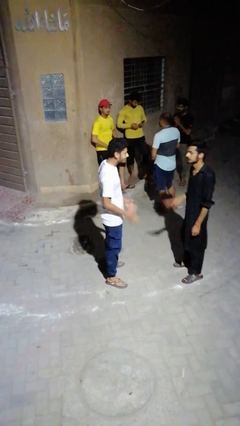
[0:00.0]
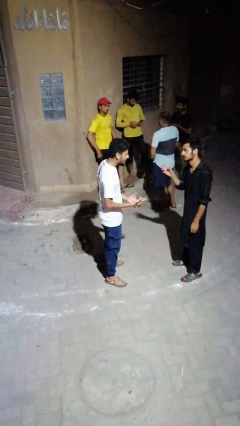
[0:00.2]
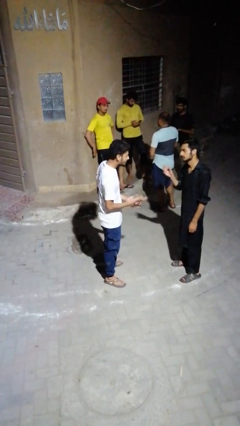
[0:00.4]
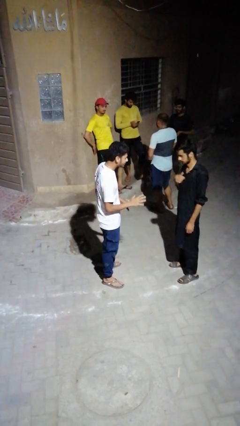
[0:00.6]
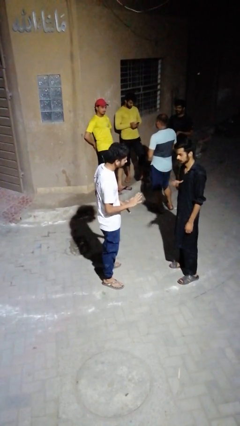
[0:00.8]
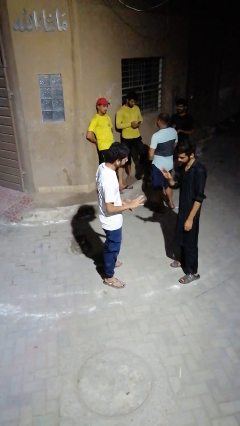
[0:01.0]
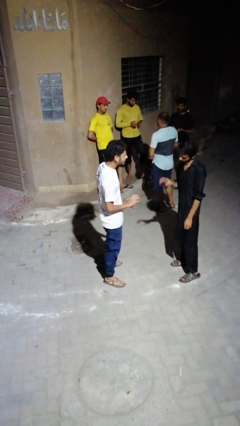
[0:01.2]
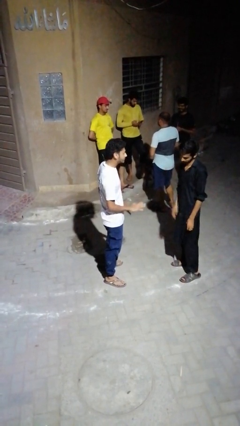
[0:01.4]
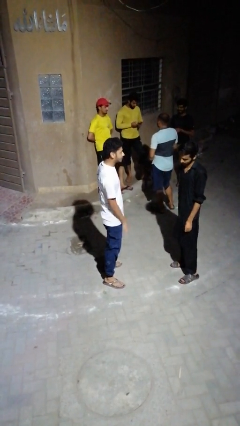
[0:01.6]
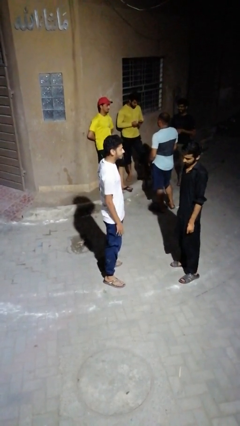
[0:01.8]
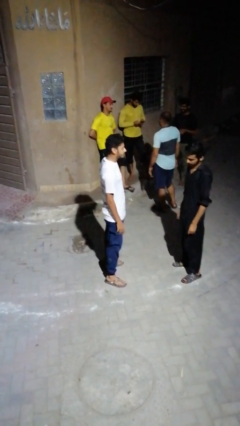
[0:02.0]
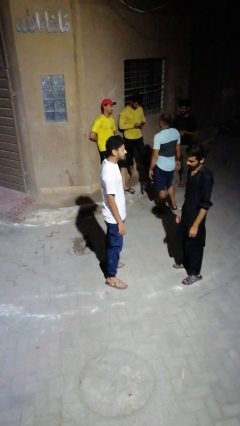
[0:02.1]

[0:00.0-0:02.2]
person talks to person

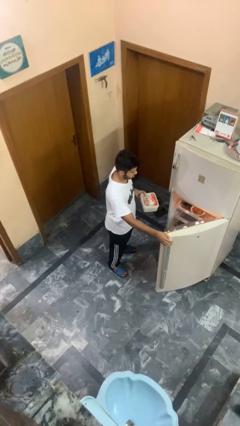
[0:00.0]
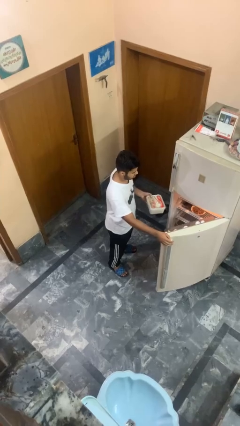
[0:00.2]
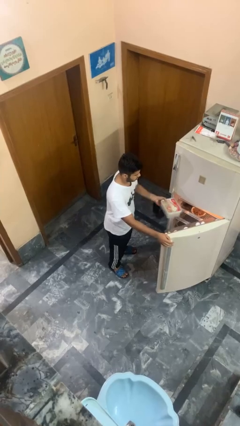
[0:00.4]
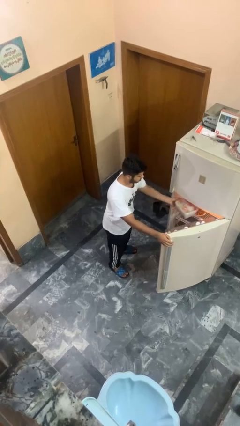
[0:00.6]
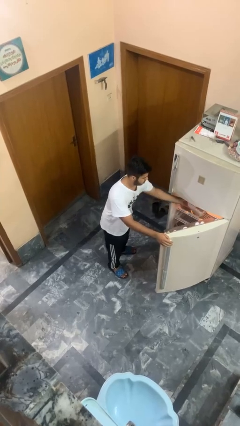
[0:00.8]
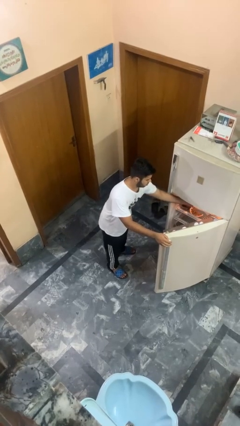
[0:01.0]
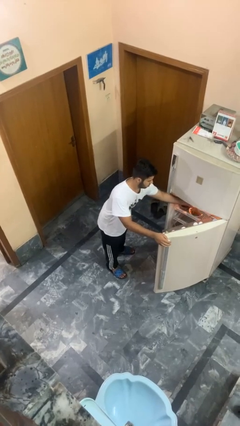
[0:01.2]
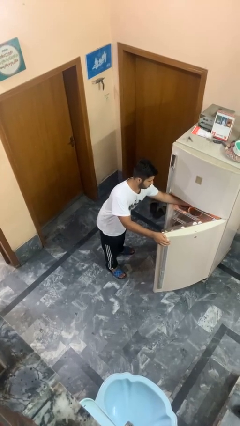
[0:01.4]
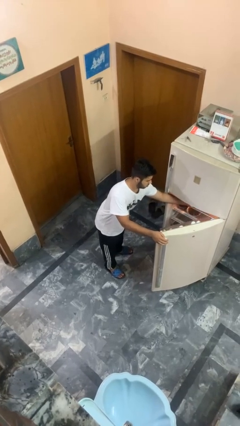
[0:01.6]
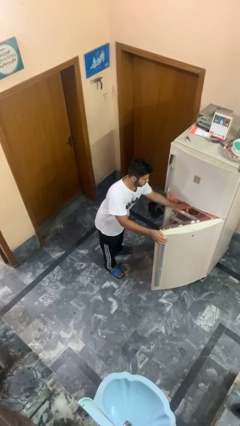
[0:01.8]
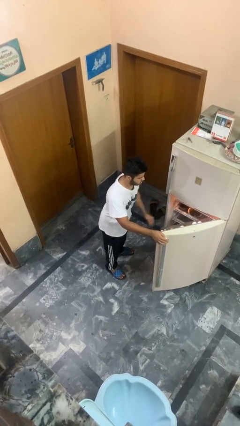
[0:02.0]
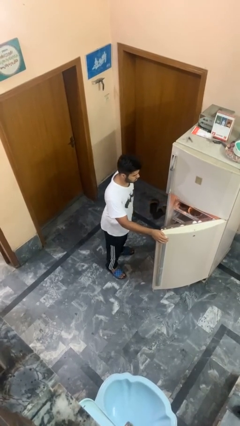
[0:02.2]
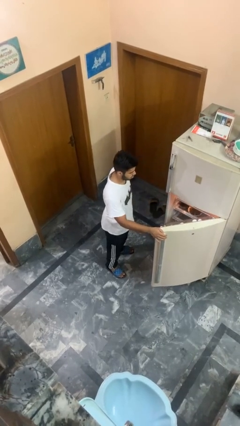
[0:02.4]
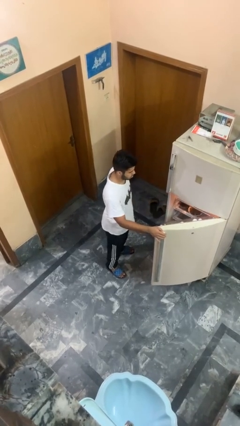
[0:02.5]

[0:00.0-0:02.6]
person puts object into refrigerator

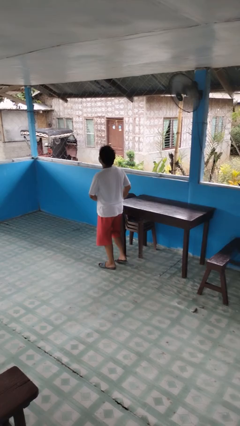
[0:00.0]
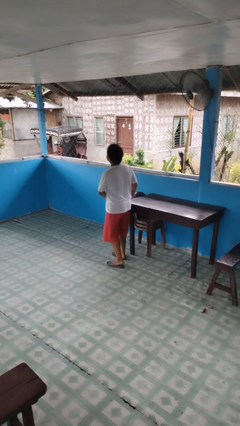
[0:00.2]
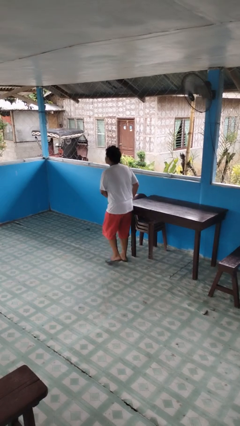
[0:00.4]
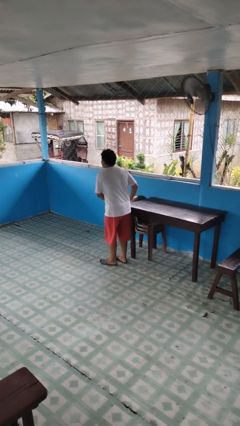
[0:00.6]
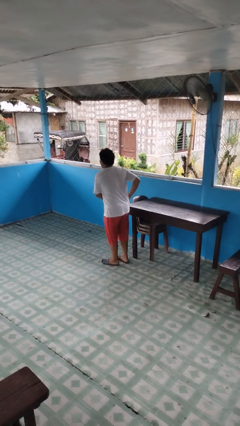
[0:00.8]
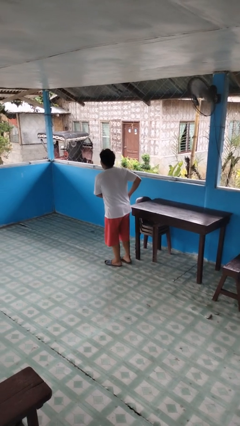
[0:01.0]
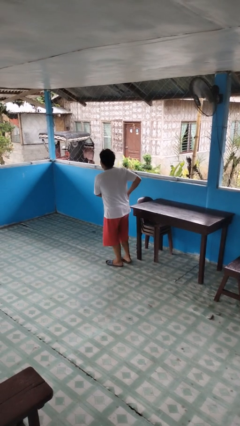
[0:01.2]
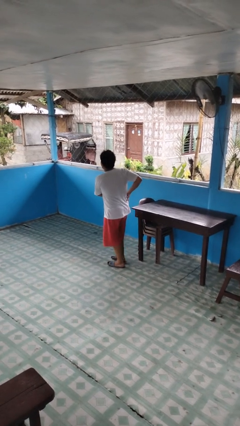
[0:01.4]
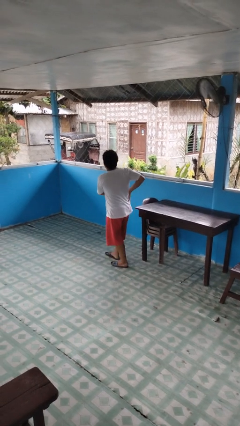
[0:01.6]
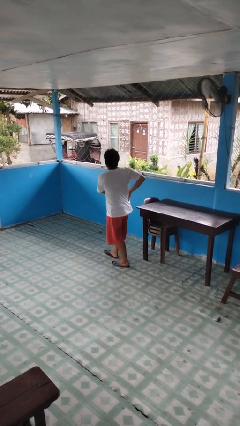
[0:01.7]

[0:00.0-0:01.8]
person bumps into table

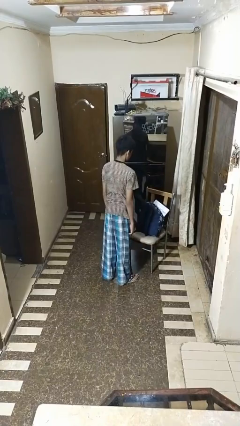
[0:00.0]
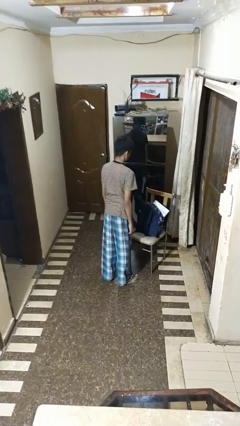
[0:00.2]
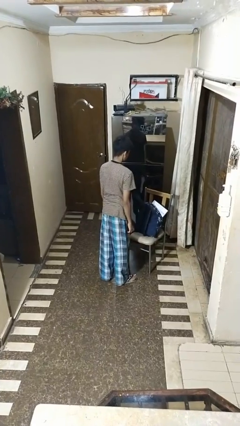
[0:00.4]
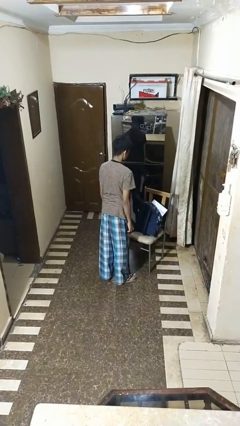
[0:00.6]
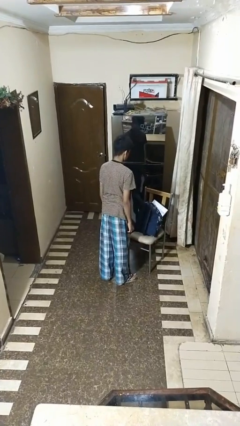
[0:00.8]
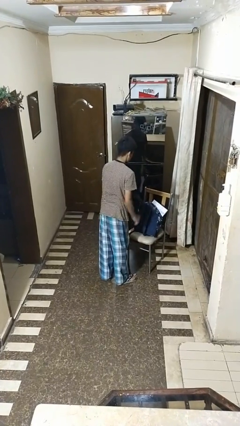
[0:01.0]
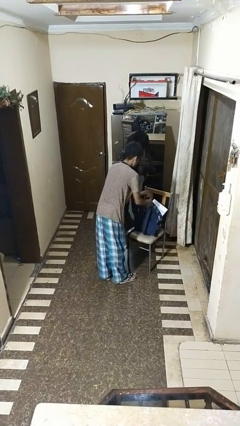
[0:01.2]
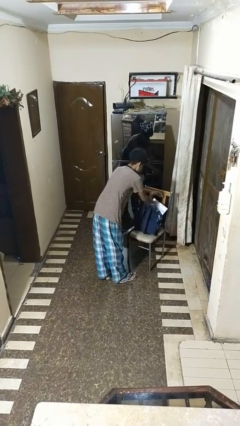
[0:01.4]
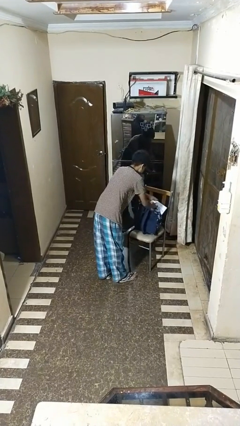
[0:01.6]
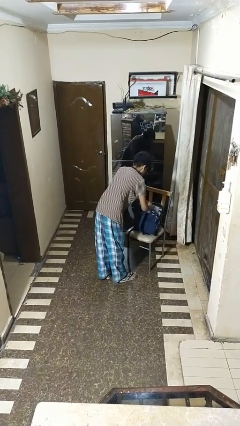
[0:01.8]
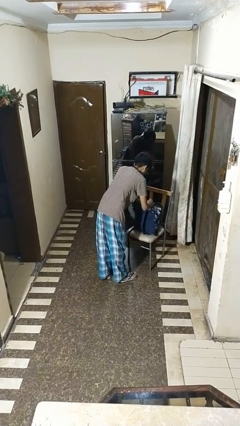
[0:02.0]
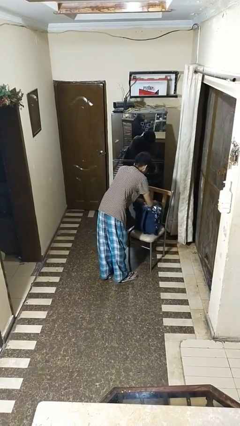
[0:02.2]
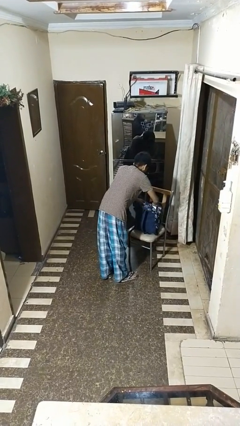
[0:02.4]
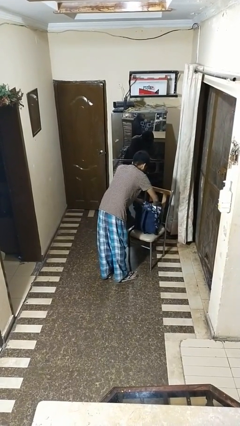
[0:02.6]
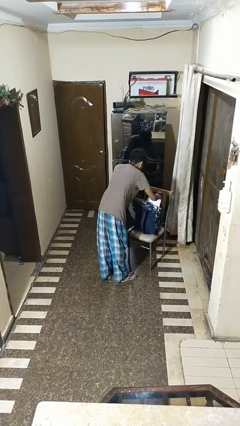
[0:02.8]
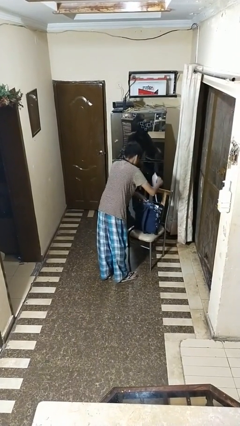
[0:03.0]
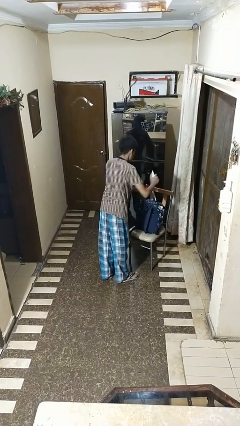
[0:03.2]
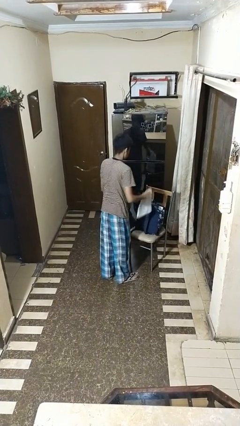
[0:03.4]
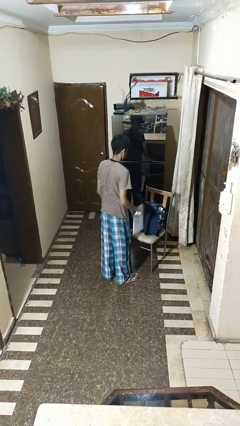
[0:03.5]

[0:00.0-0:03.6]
person takes object from bag

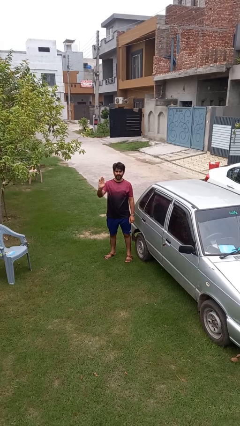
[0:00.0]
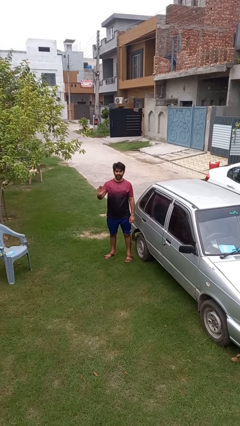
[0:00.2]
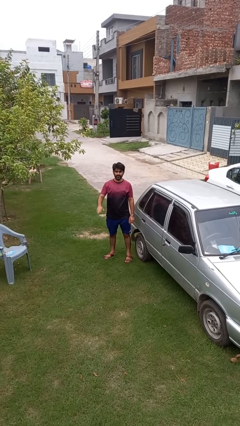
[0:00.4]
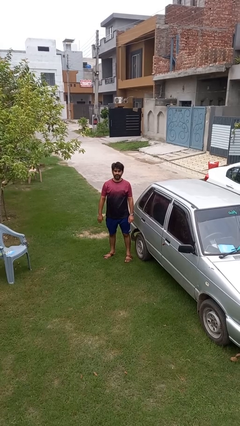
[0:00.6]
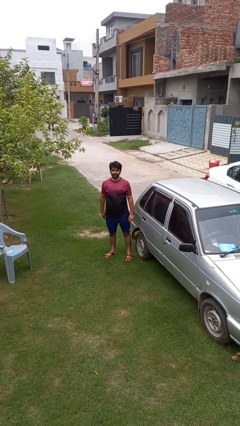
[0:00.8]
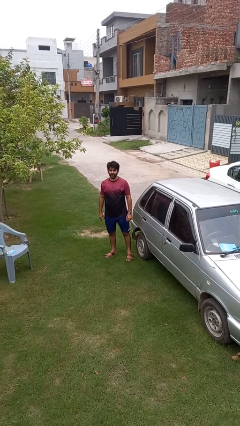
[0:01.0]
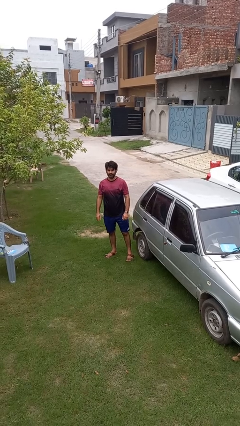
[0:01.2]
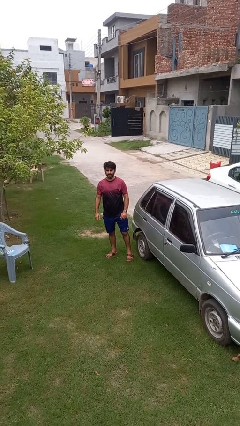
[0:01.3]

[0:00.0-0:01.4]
person gestures lower hand

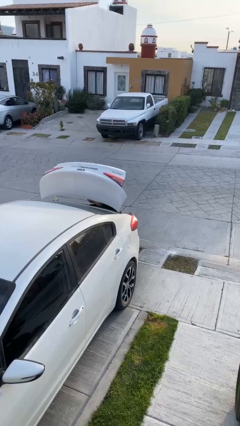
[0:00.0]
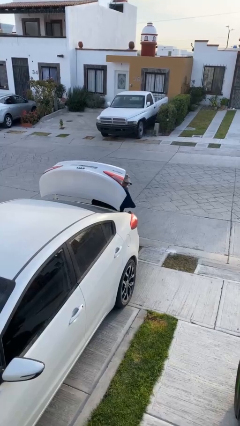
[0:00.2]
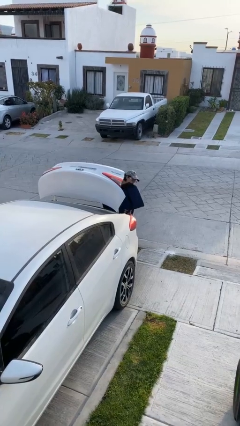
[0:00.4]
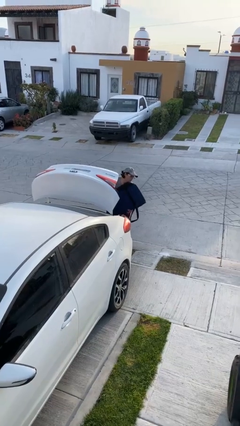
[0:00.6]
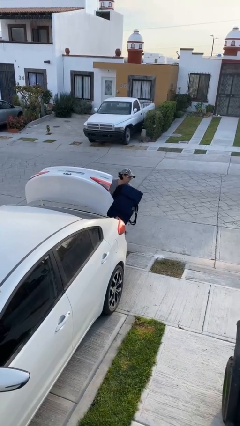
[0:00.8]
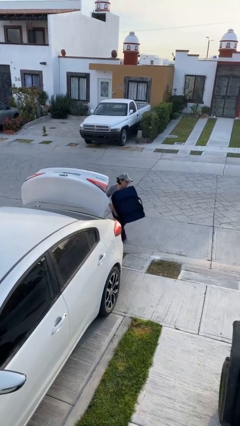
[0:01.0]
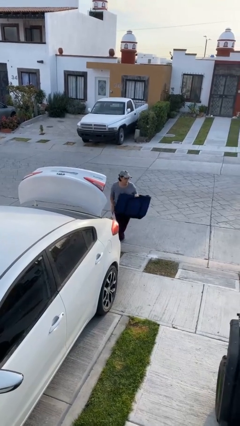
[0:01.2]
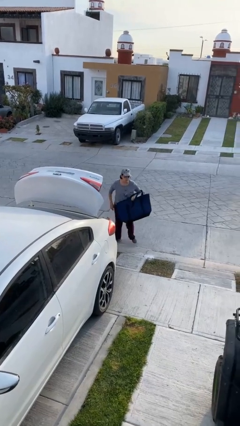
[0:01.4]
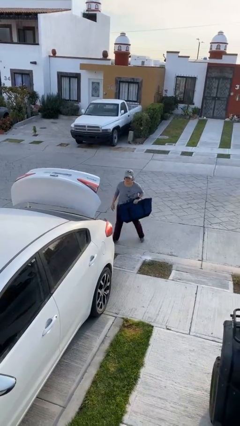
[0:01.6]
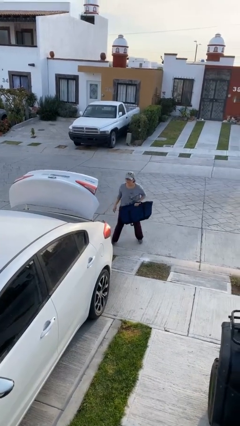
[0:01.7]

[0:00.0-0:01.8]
person unloads car

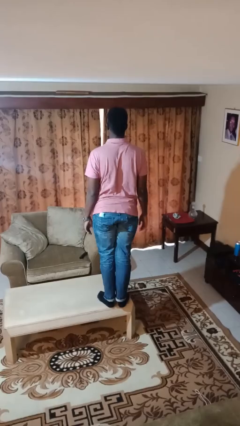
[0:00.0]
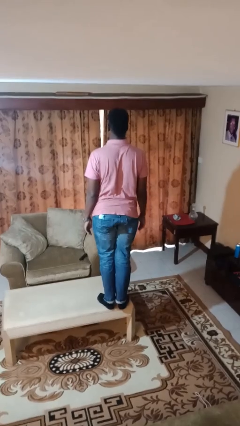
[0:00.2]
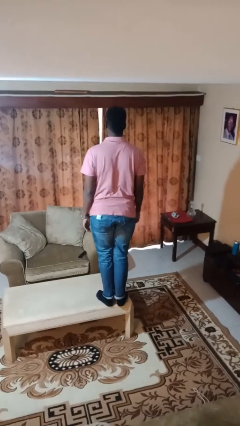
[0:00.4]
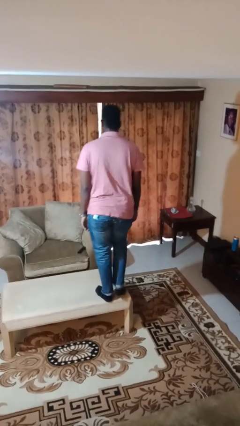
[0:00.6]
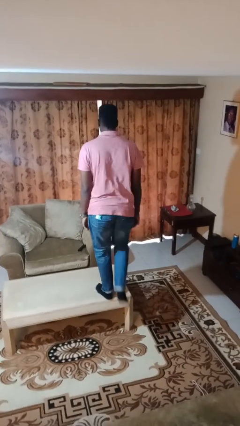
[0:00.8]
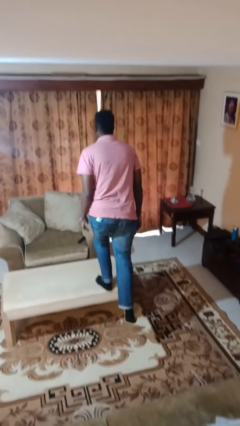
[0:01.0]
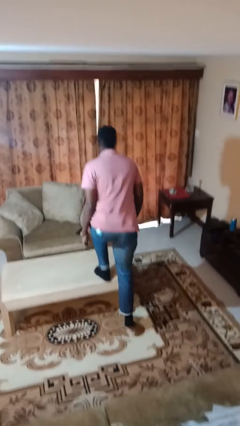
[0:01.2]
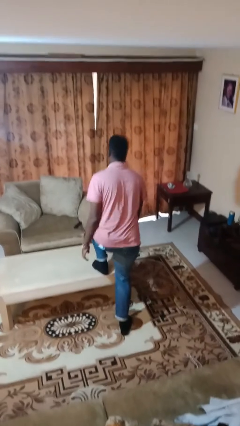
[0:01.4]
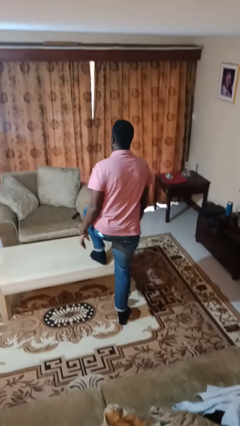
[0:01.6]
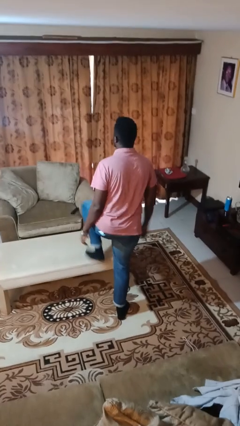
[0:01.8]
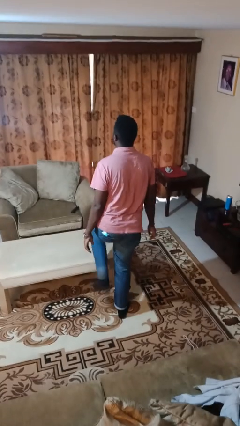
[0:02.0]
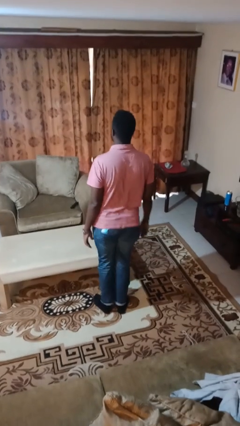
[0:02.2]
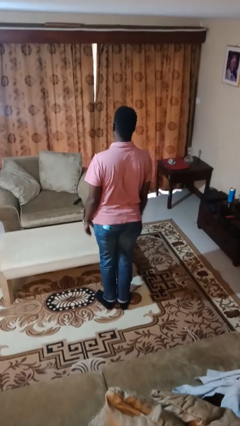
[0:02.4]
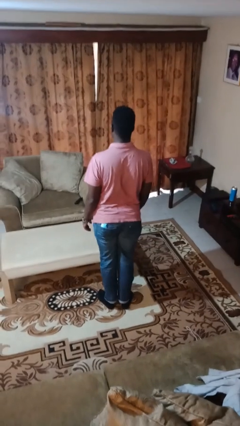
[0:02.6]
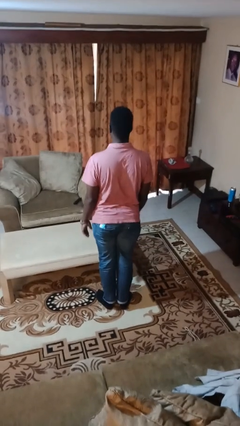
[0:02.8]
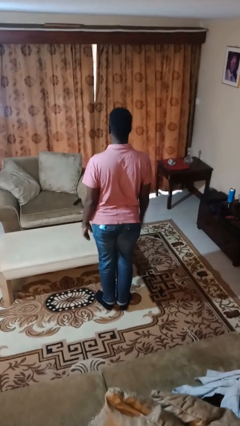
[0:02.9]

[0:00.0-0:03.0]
person climbs off table

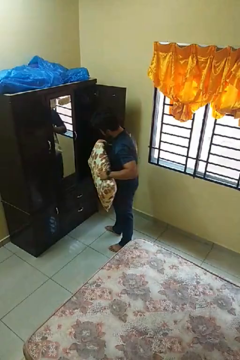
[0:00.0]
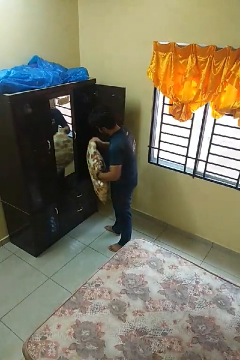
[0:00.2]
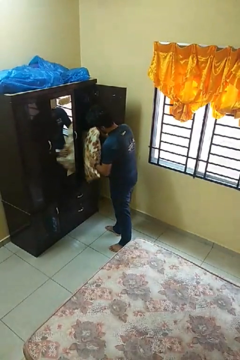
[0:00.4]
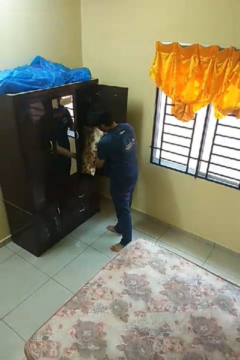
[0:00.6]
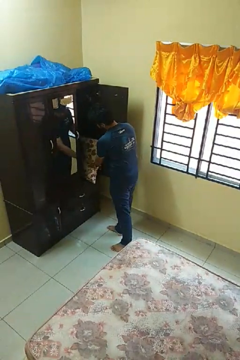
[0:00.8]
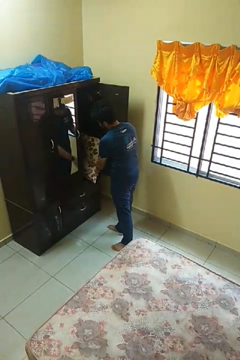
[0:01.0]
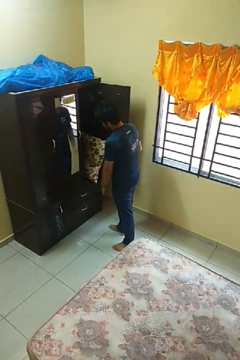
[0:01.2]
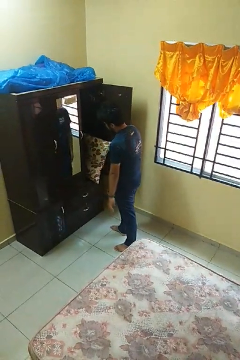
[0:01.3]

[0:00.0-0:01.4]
person puts down object into cabinet
